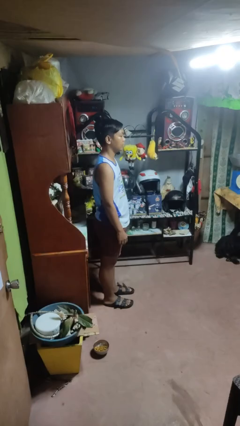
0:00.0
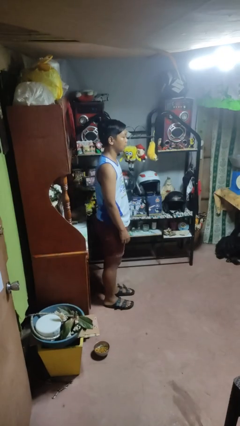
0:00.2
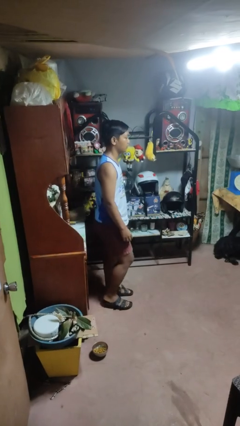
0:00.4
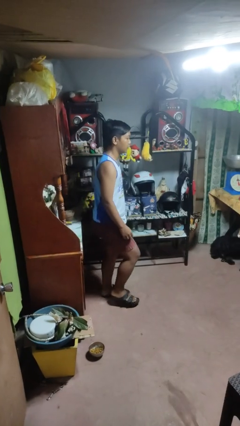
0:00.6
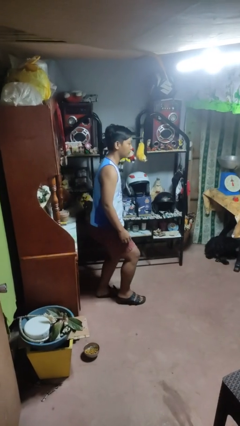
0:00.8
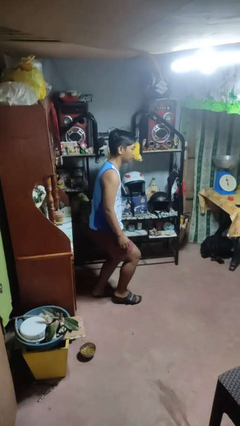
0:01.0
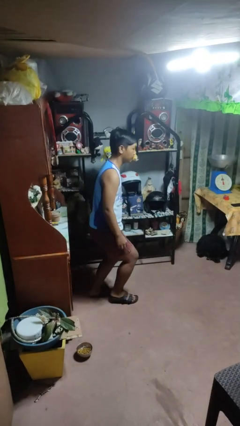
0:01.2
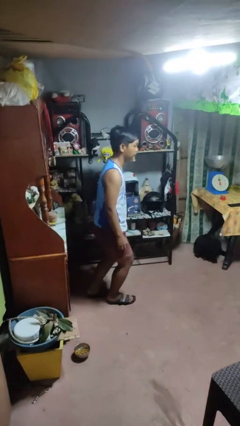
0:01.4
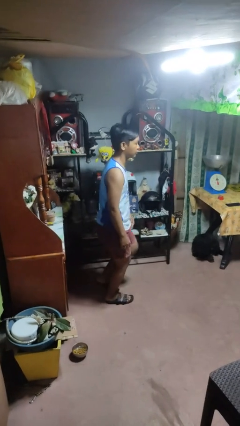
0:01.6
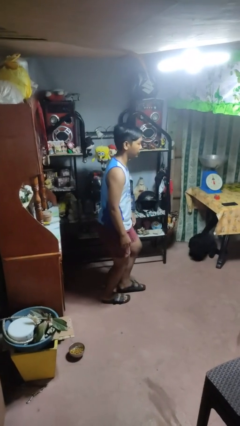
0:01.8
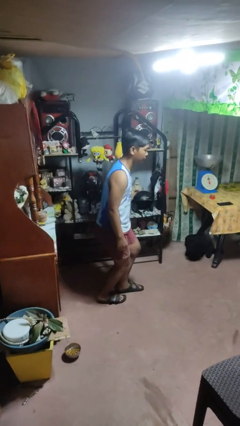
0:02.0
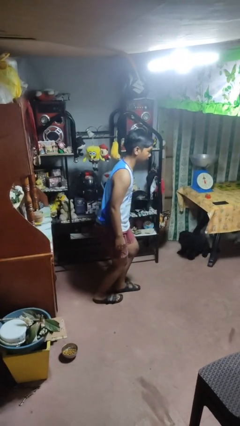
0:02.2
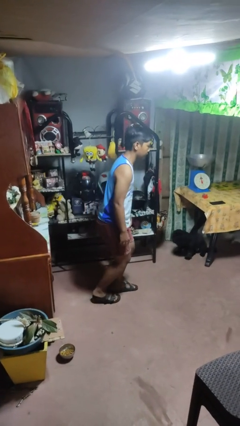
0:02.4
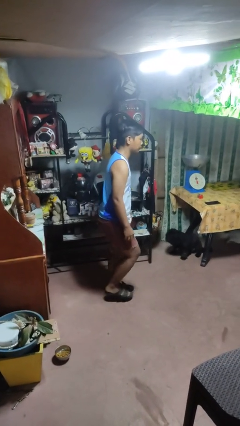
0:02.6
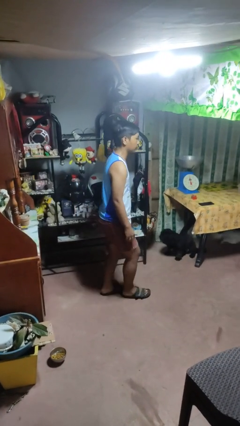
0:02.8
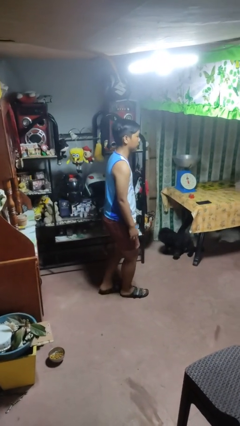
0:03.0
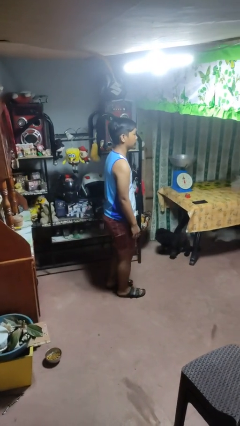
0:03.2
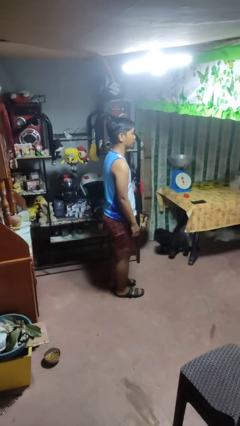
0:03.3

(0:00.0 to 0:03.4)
person walks tiptoe

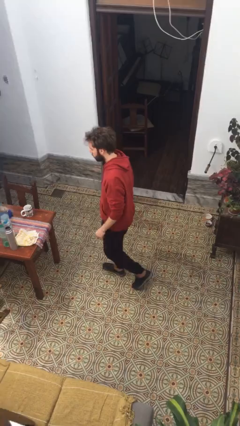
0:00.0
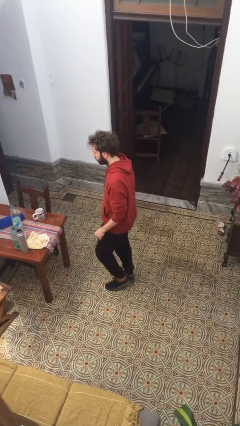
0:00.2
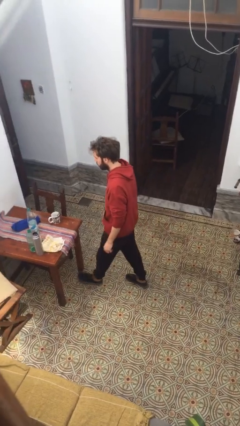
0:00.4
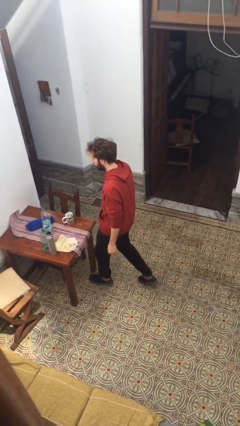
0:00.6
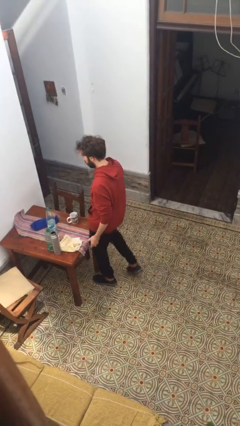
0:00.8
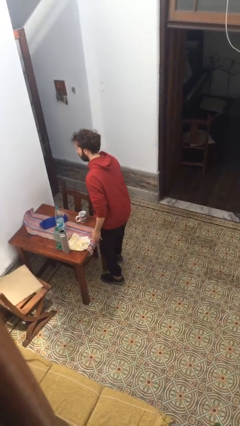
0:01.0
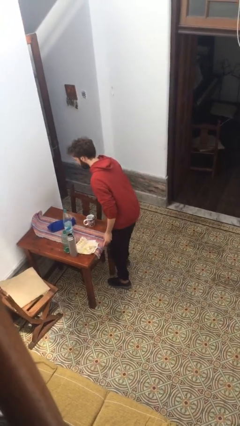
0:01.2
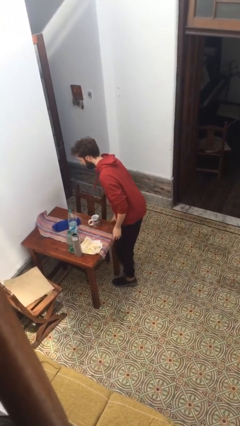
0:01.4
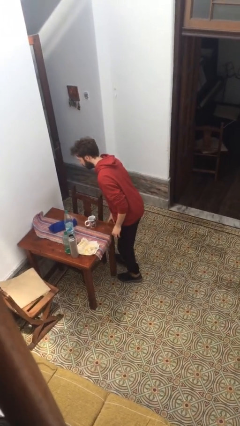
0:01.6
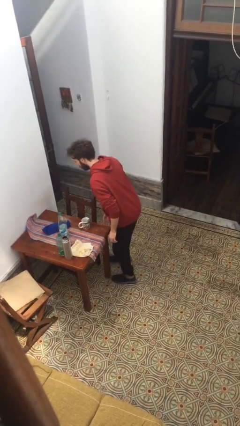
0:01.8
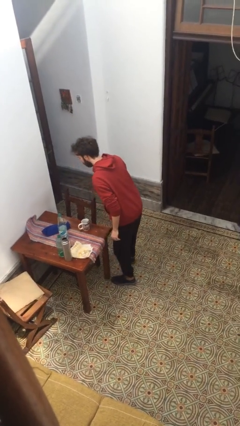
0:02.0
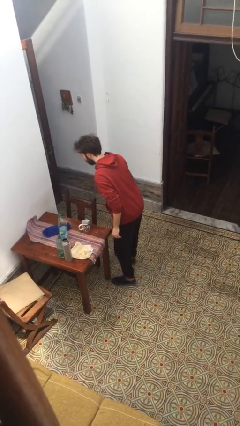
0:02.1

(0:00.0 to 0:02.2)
person bumps into table

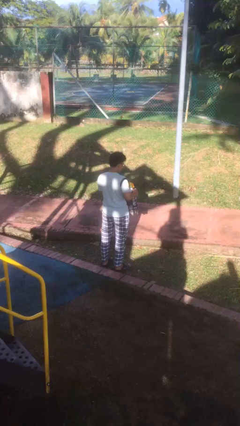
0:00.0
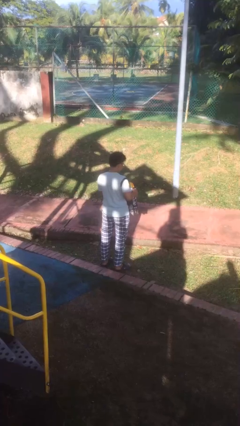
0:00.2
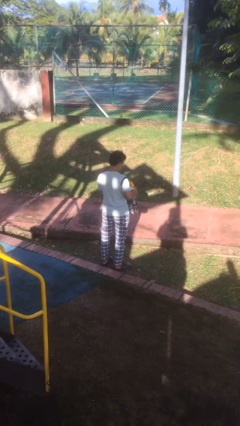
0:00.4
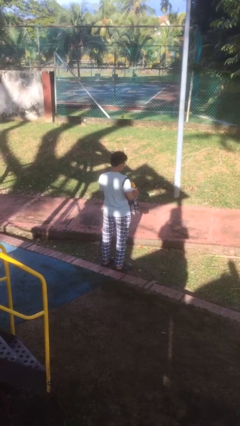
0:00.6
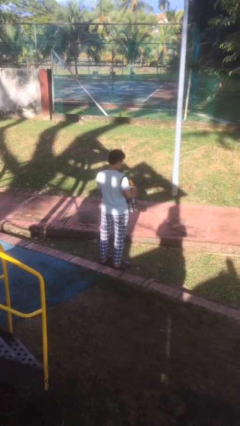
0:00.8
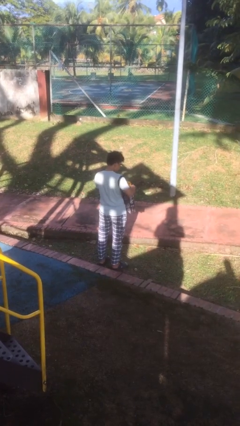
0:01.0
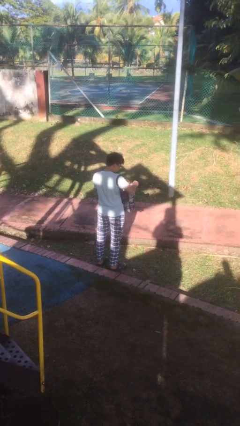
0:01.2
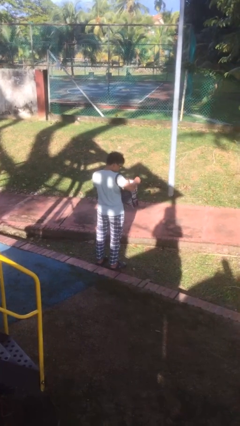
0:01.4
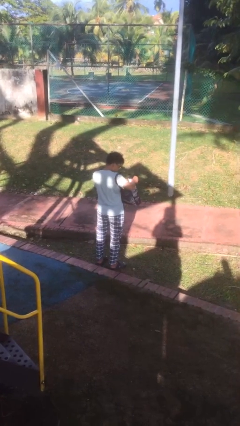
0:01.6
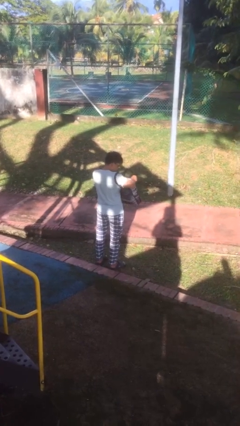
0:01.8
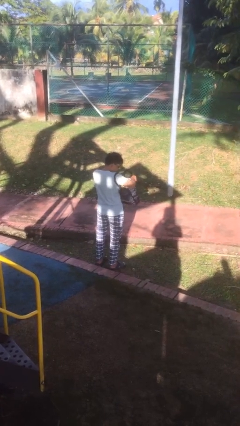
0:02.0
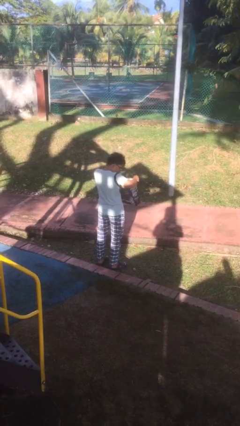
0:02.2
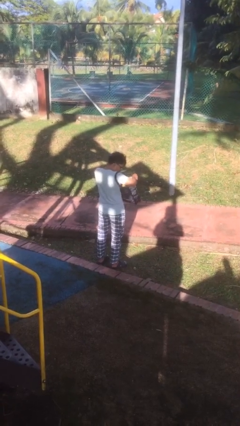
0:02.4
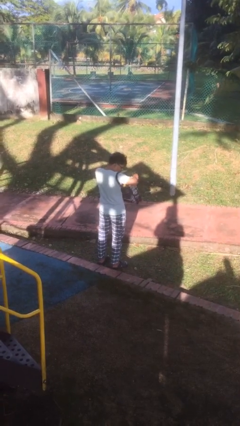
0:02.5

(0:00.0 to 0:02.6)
person searches in bag

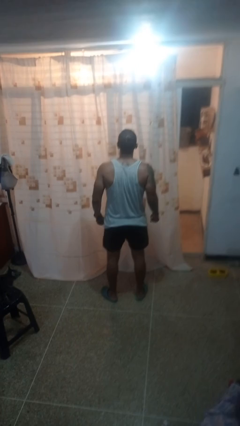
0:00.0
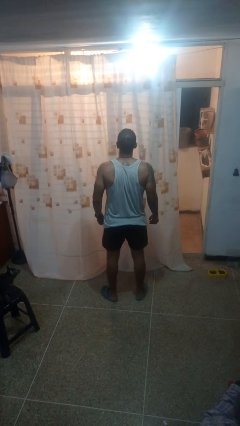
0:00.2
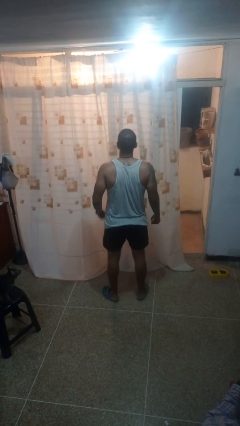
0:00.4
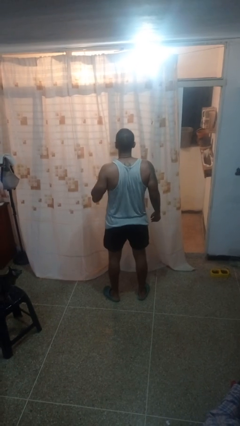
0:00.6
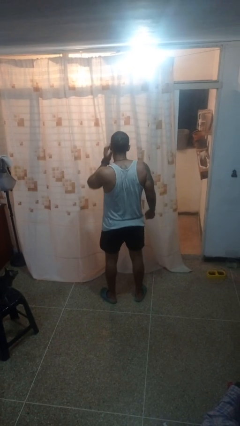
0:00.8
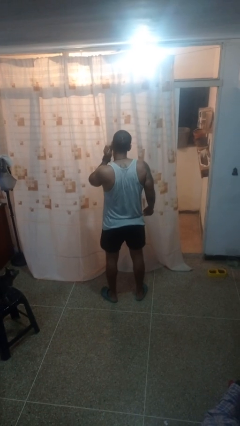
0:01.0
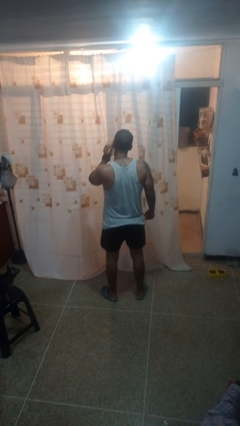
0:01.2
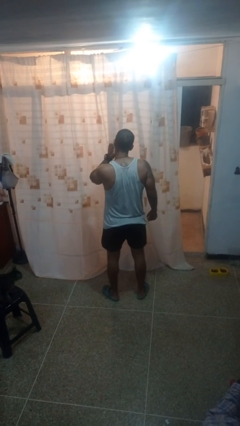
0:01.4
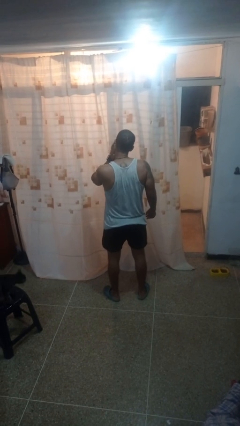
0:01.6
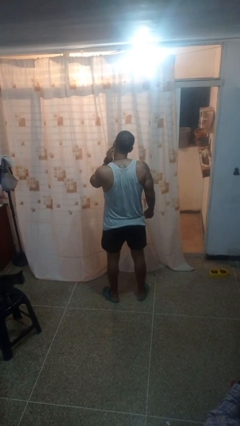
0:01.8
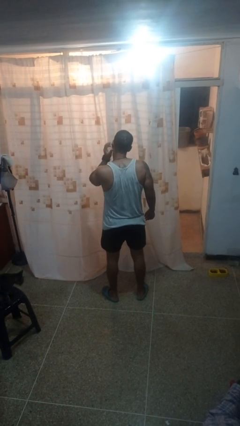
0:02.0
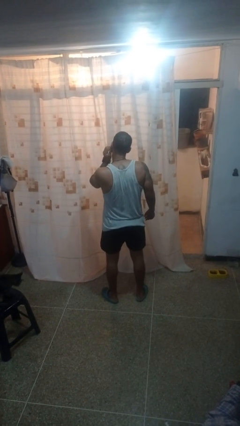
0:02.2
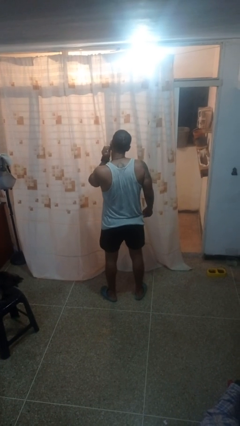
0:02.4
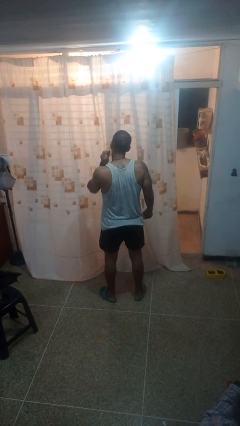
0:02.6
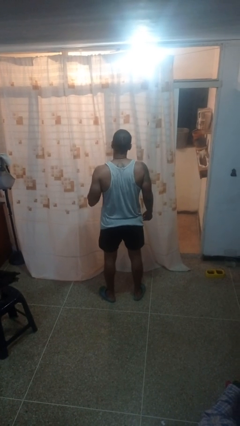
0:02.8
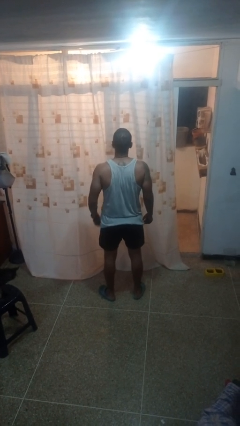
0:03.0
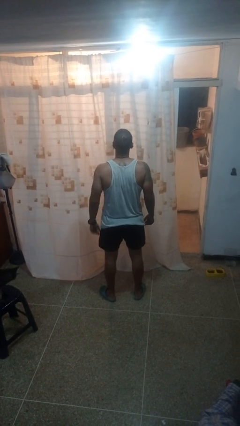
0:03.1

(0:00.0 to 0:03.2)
person touches earlobe

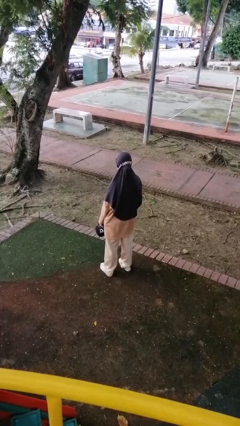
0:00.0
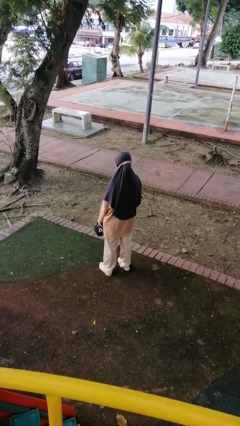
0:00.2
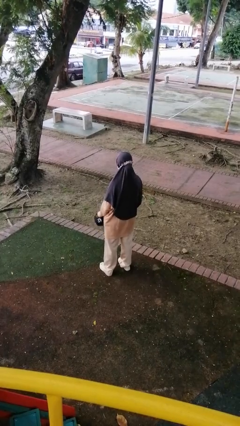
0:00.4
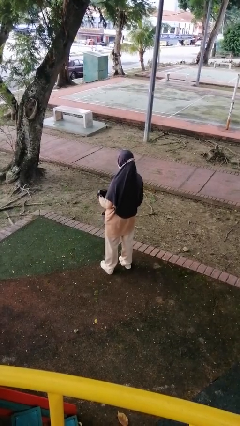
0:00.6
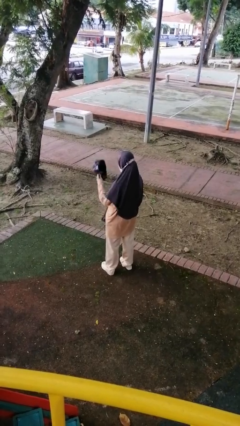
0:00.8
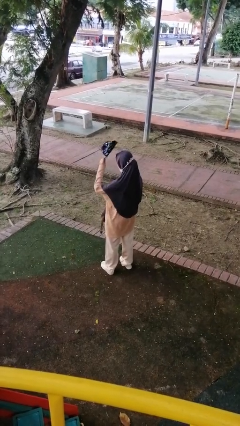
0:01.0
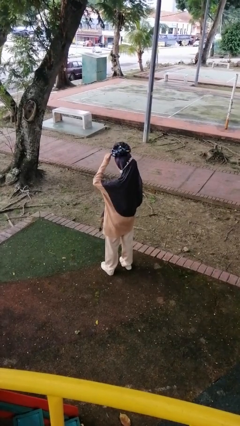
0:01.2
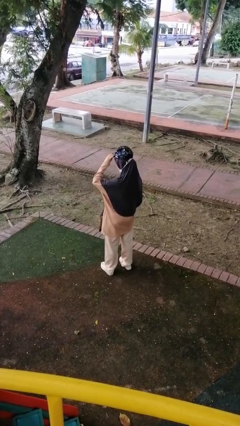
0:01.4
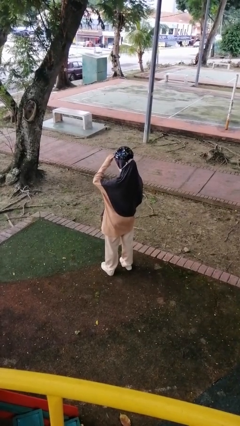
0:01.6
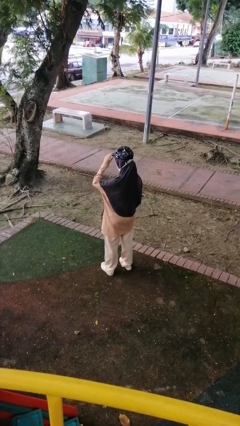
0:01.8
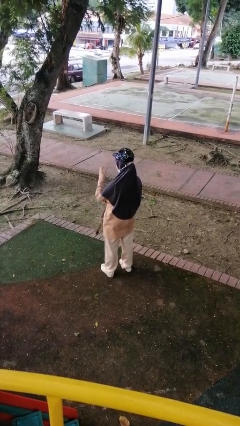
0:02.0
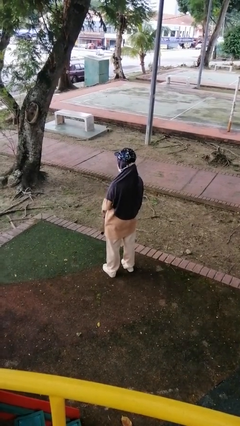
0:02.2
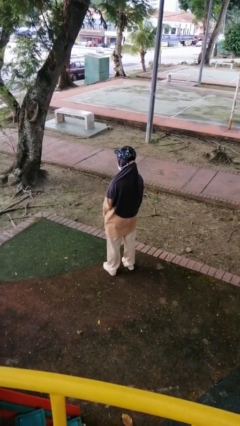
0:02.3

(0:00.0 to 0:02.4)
person puts on hat

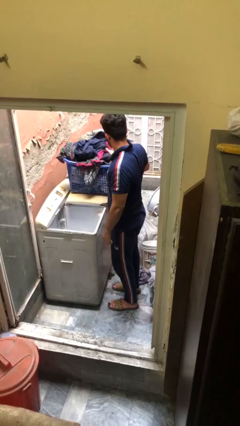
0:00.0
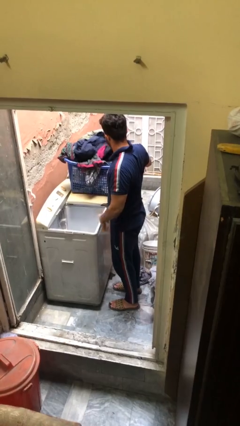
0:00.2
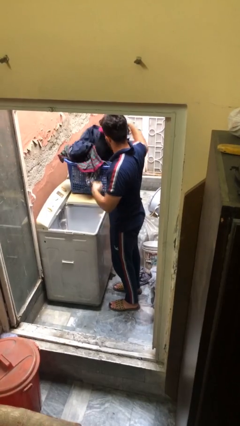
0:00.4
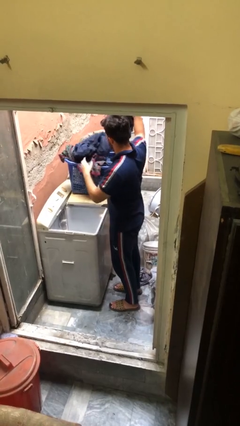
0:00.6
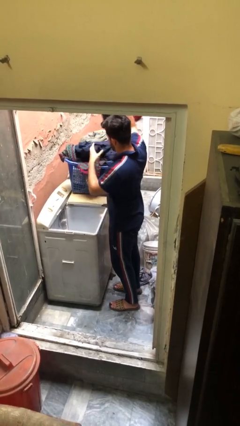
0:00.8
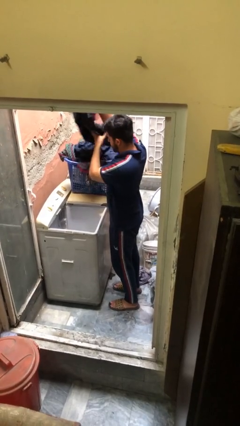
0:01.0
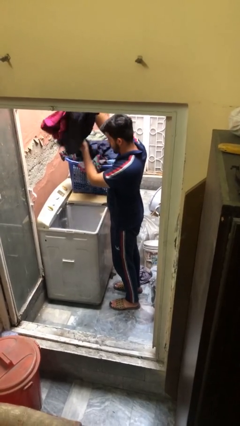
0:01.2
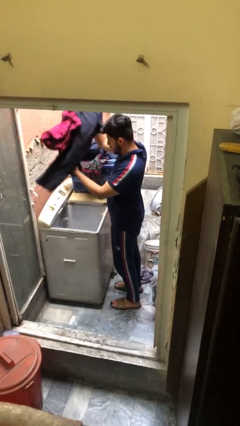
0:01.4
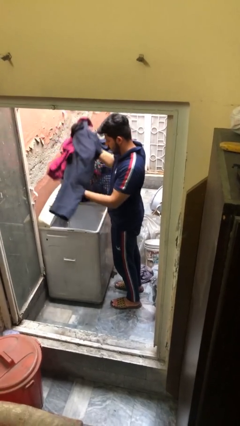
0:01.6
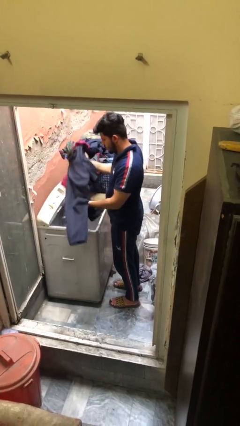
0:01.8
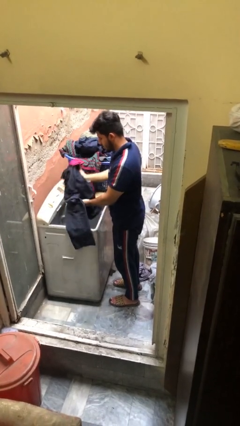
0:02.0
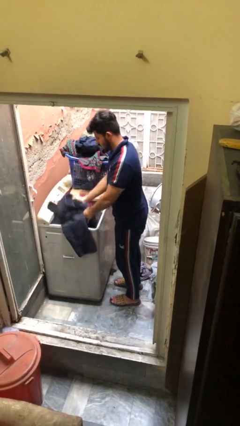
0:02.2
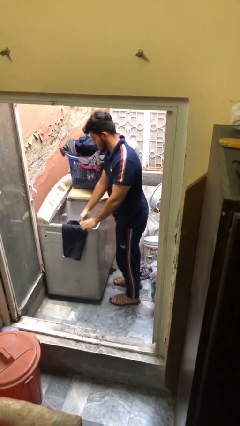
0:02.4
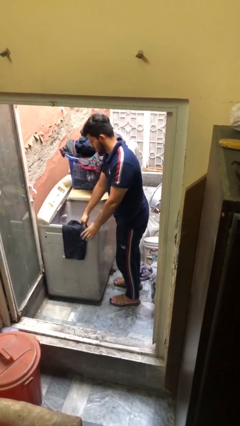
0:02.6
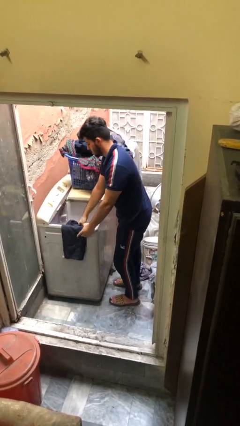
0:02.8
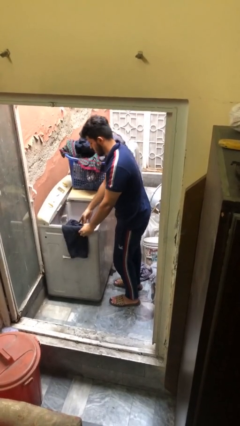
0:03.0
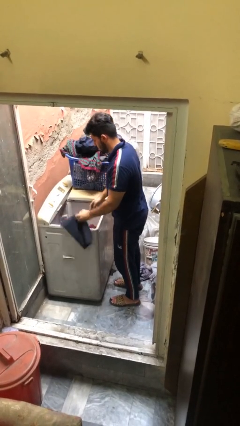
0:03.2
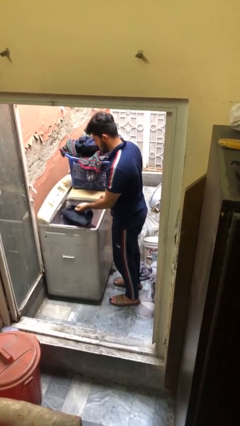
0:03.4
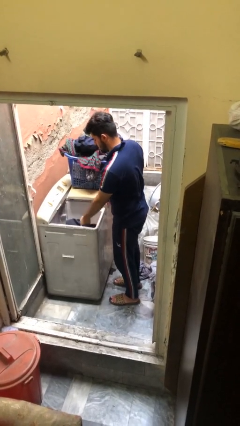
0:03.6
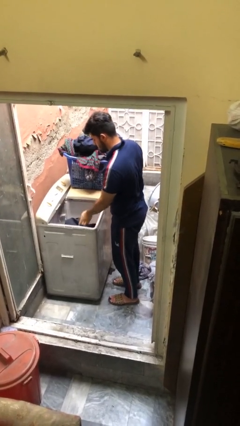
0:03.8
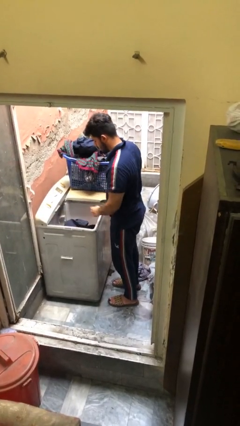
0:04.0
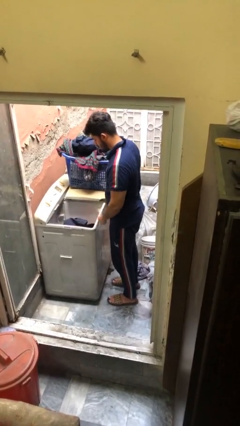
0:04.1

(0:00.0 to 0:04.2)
person loads clotheswasher
